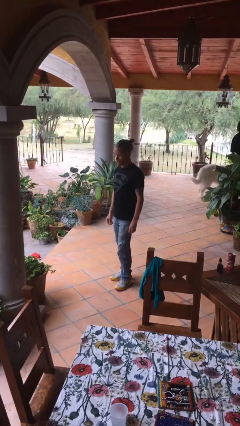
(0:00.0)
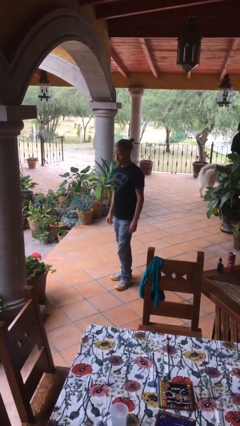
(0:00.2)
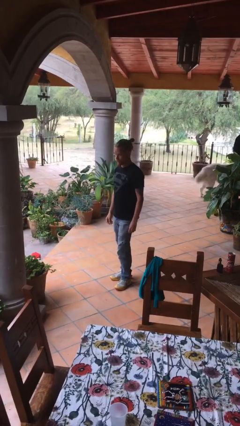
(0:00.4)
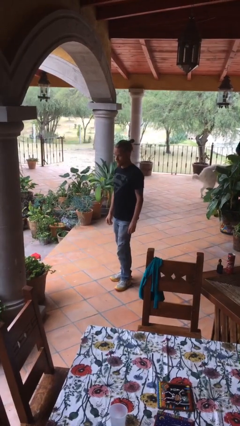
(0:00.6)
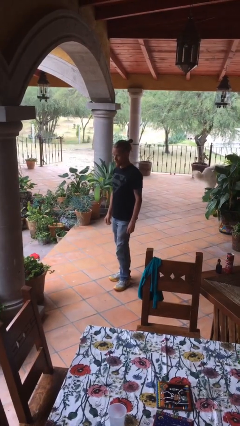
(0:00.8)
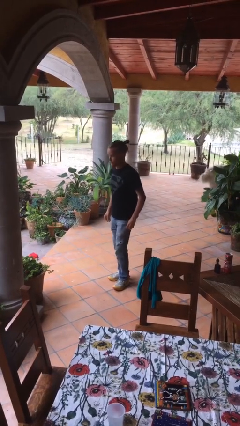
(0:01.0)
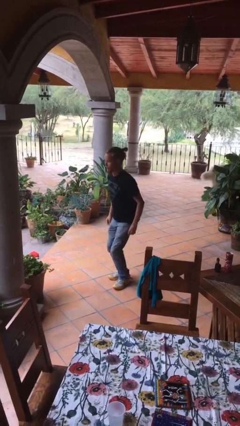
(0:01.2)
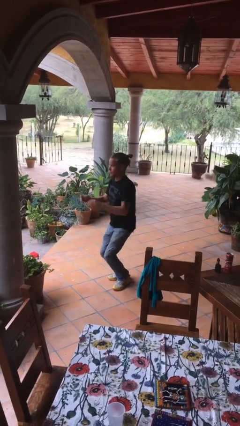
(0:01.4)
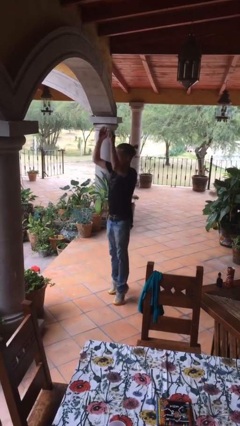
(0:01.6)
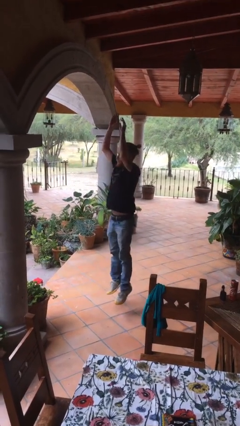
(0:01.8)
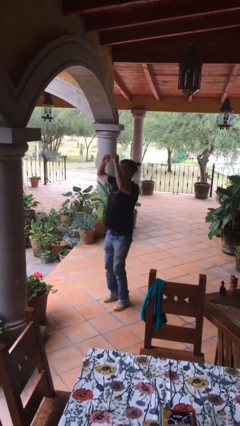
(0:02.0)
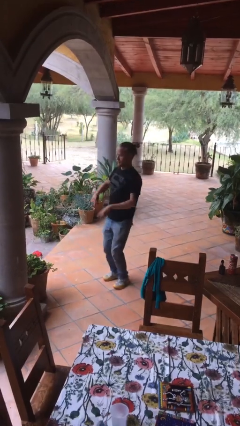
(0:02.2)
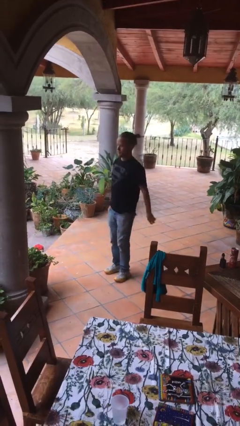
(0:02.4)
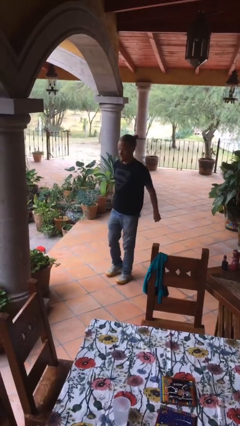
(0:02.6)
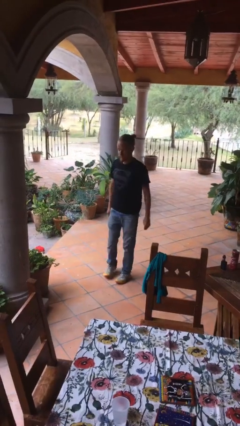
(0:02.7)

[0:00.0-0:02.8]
person jumps

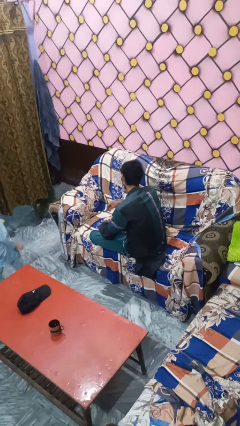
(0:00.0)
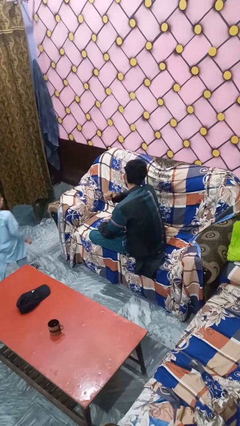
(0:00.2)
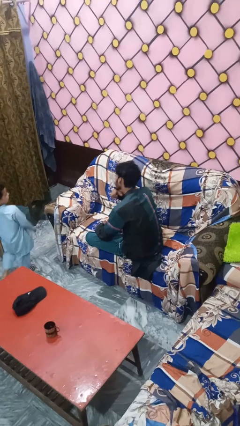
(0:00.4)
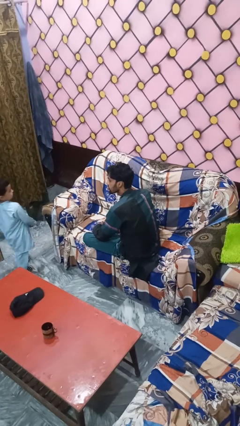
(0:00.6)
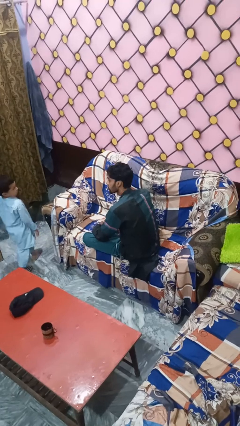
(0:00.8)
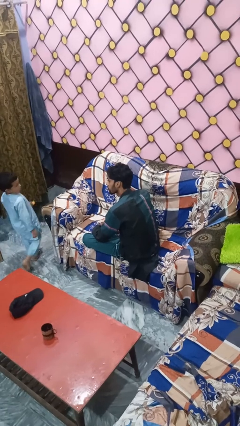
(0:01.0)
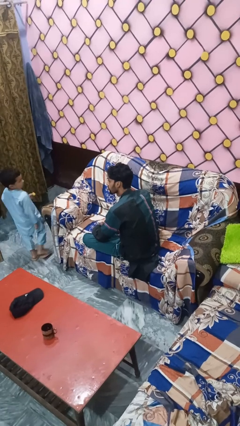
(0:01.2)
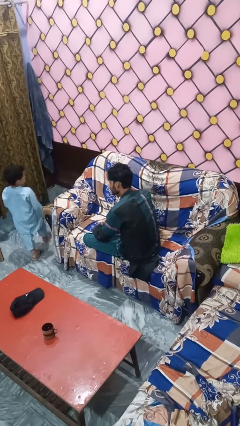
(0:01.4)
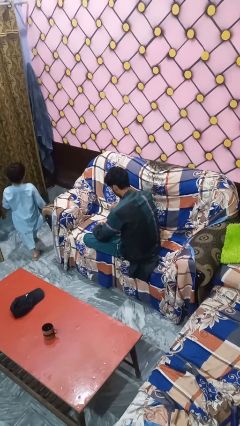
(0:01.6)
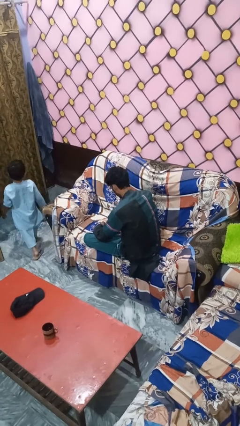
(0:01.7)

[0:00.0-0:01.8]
person gestures cut

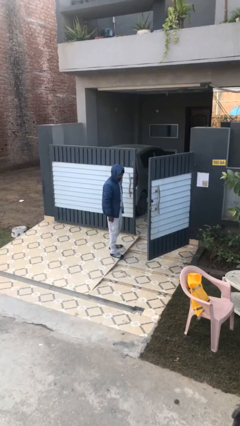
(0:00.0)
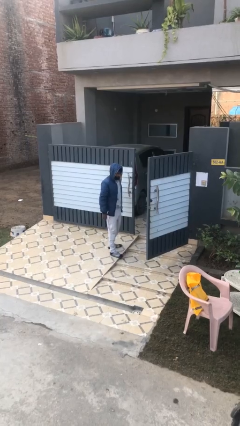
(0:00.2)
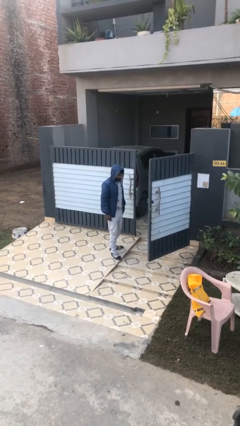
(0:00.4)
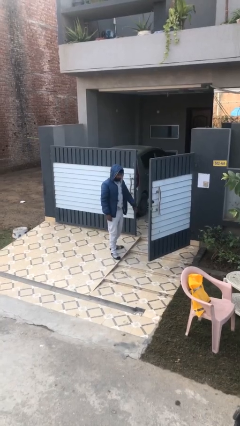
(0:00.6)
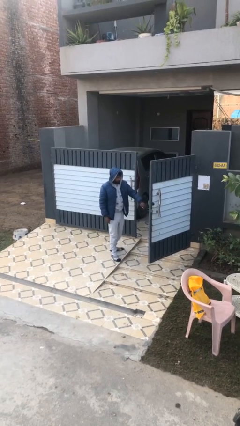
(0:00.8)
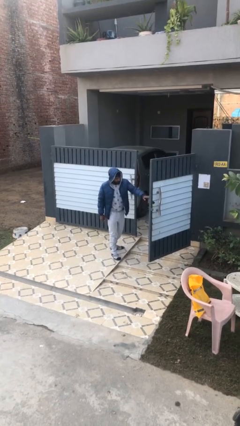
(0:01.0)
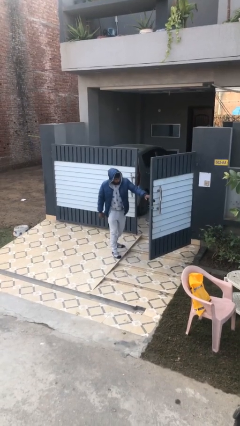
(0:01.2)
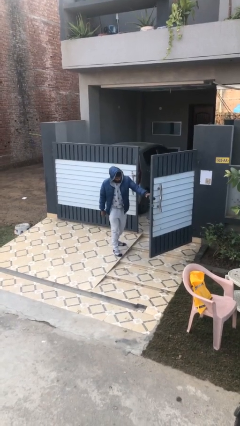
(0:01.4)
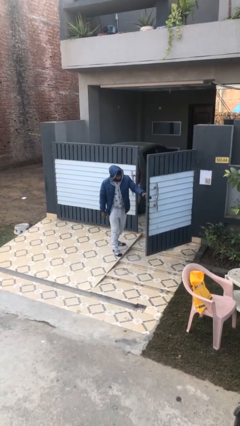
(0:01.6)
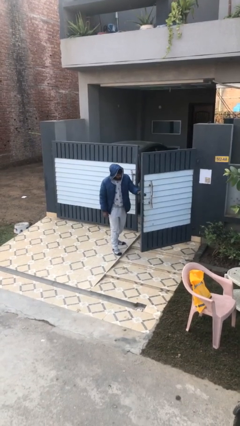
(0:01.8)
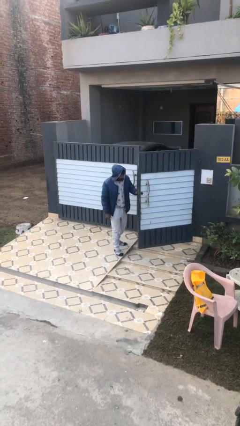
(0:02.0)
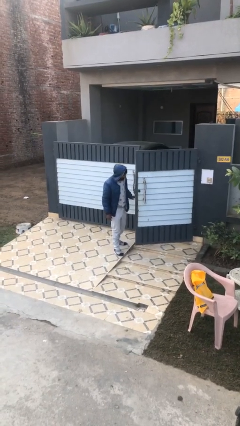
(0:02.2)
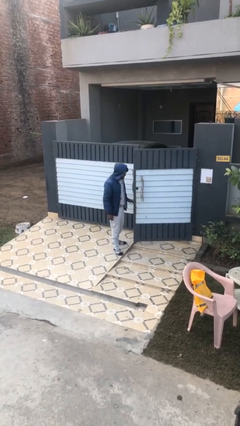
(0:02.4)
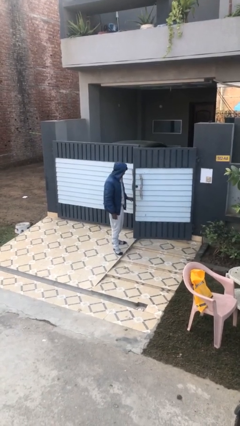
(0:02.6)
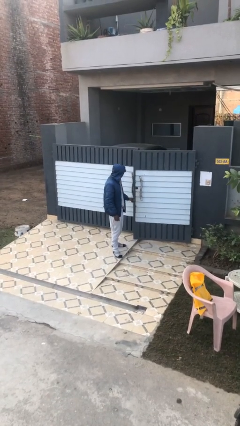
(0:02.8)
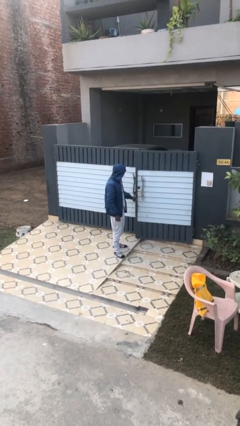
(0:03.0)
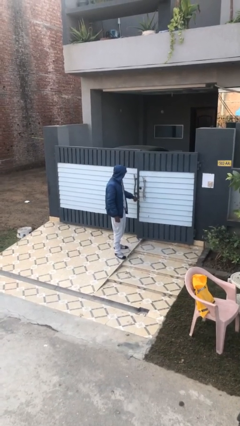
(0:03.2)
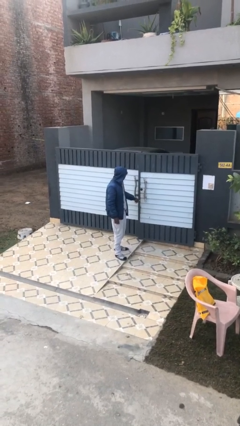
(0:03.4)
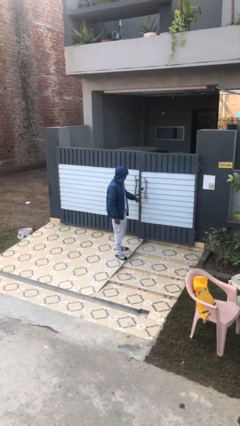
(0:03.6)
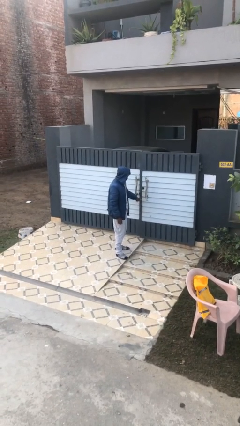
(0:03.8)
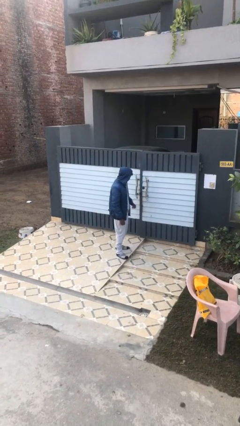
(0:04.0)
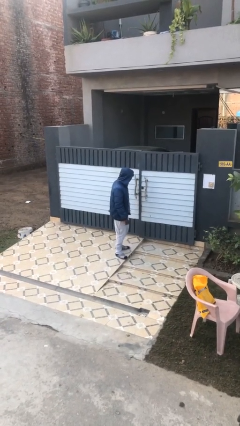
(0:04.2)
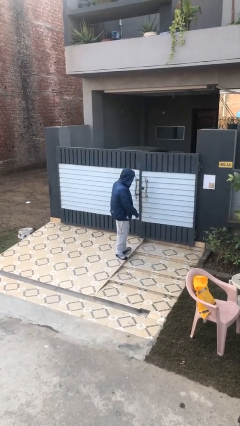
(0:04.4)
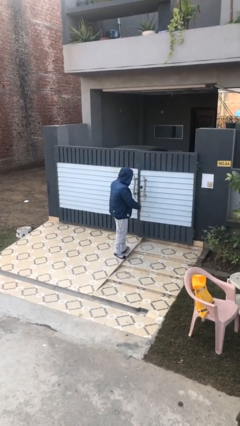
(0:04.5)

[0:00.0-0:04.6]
person closes facility door

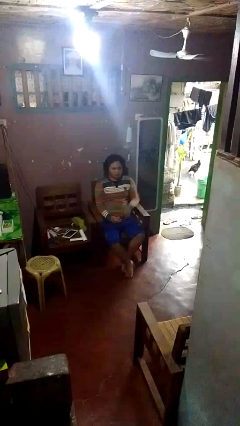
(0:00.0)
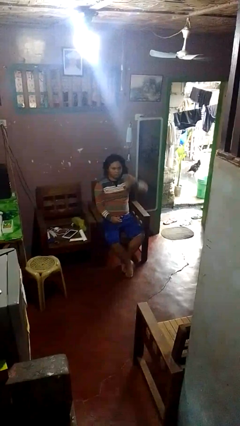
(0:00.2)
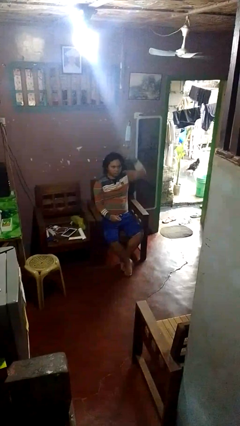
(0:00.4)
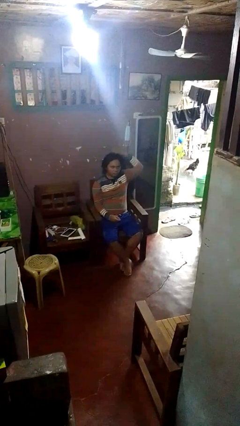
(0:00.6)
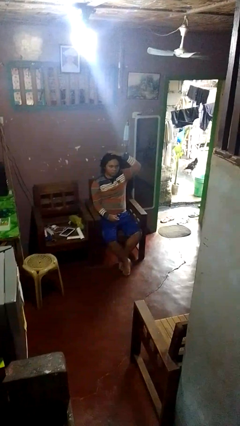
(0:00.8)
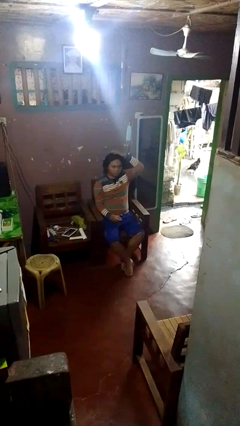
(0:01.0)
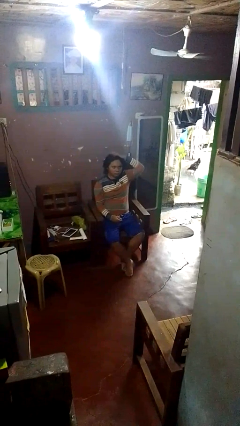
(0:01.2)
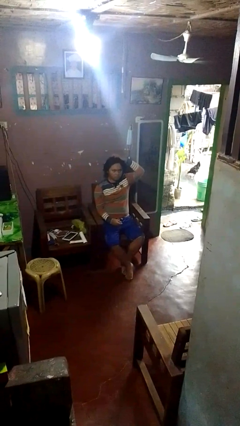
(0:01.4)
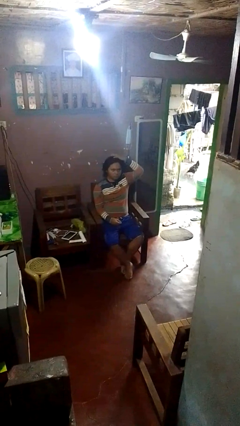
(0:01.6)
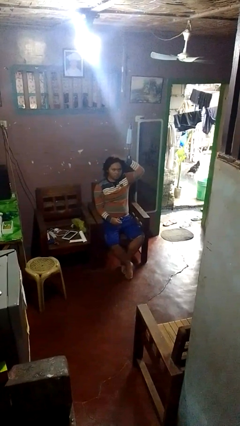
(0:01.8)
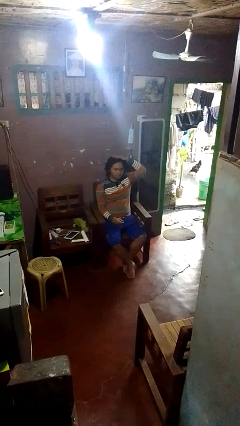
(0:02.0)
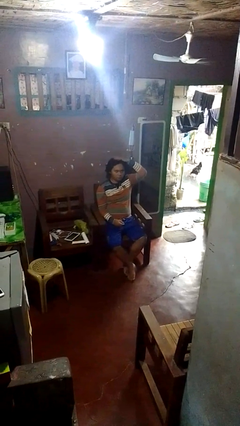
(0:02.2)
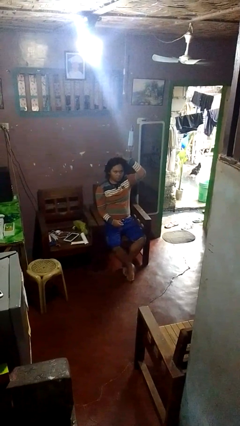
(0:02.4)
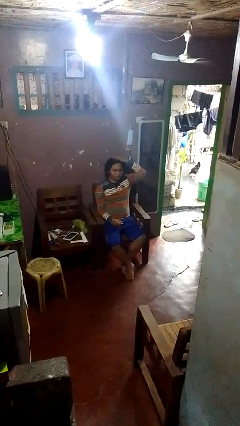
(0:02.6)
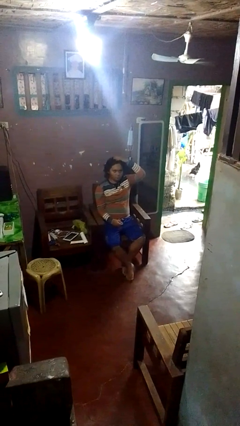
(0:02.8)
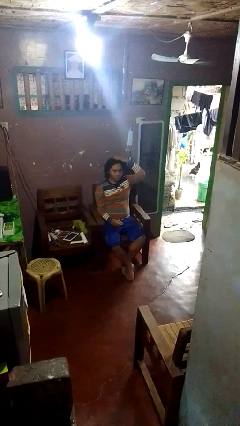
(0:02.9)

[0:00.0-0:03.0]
person pats head

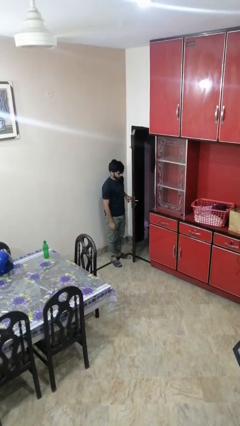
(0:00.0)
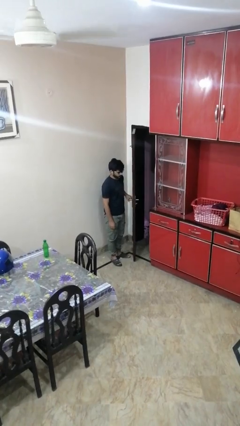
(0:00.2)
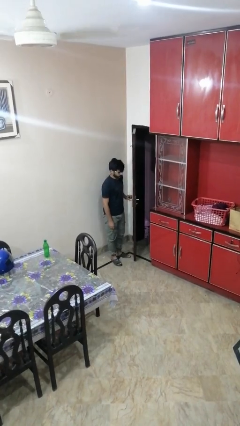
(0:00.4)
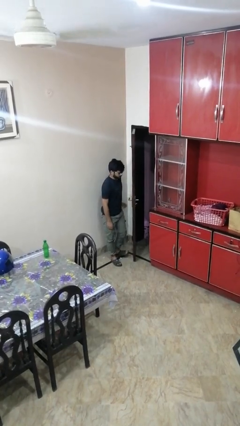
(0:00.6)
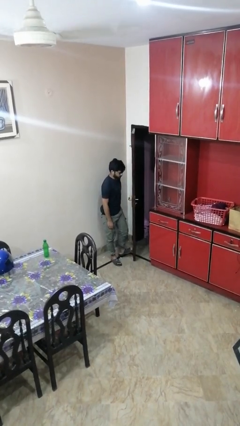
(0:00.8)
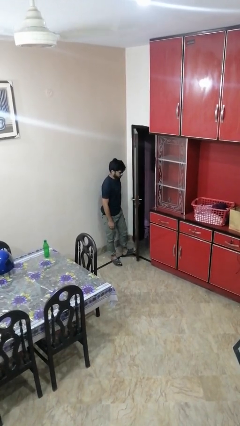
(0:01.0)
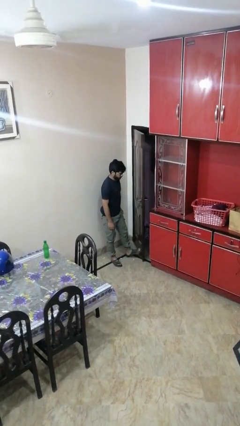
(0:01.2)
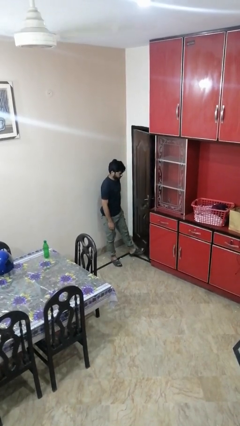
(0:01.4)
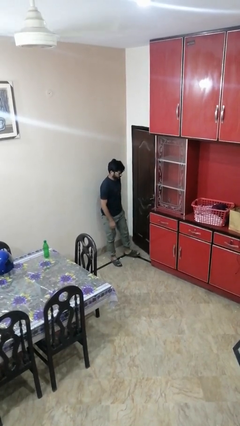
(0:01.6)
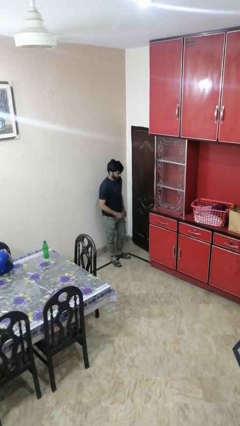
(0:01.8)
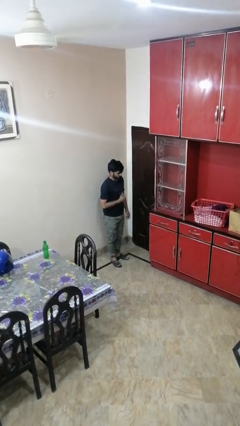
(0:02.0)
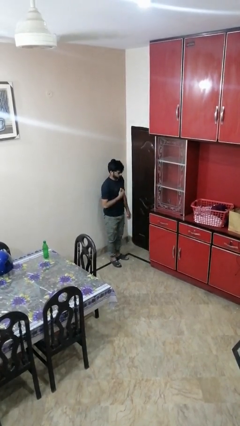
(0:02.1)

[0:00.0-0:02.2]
person closes door with foot

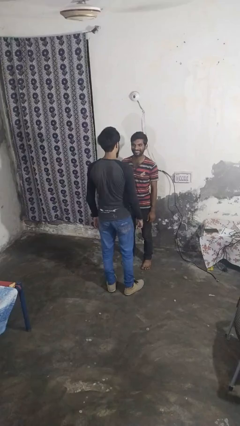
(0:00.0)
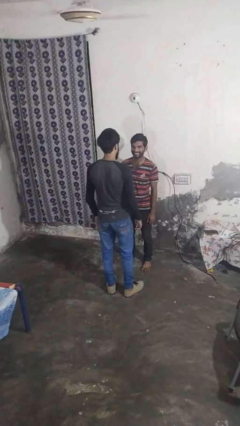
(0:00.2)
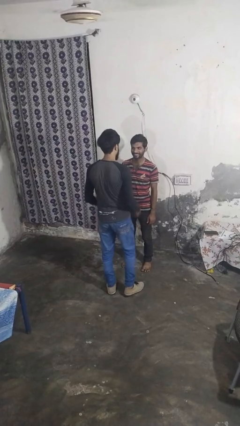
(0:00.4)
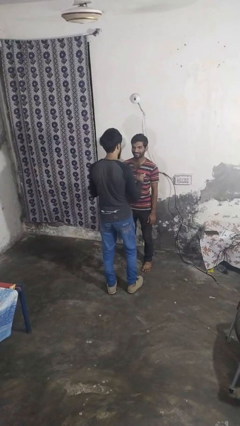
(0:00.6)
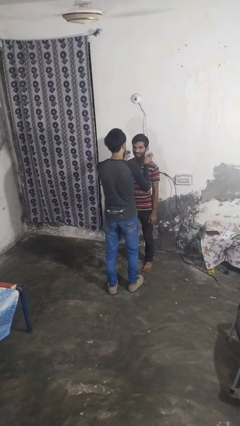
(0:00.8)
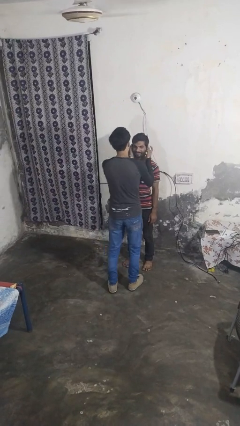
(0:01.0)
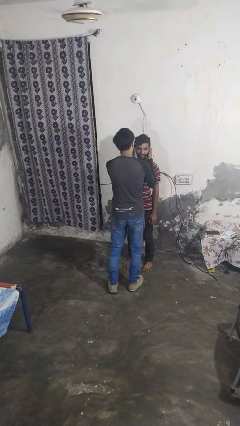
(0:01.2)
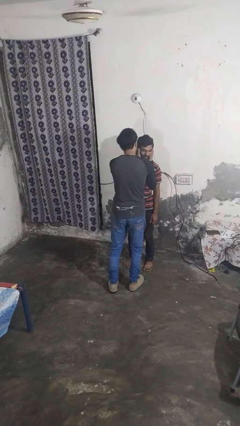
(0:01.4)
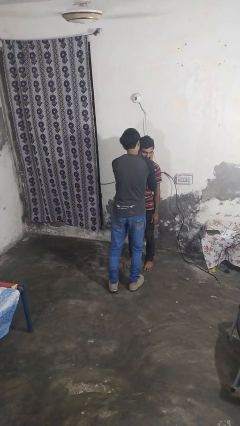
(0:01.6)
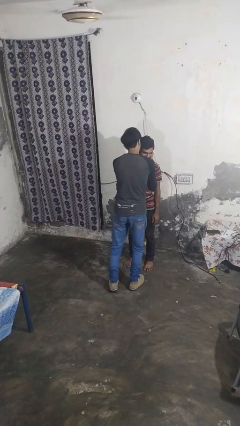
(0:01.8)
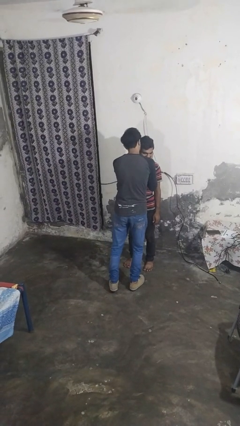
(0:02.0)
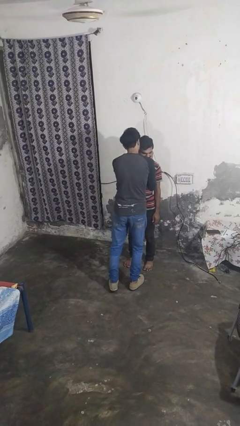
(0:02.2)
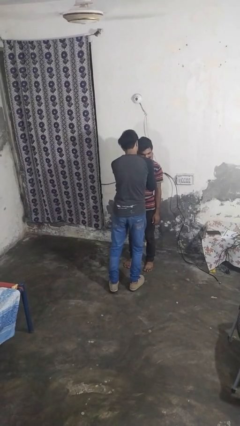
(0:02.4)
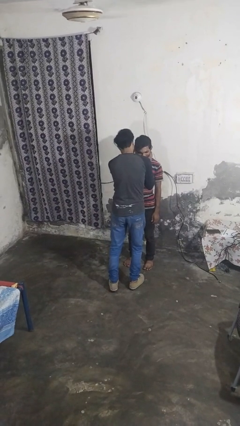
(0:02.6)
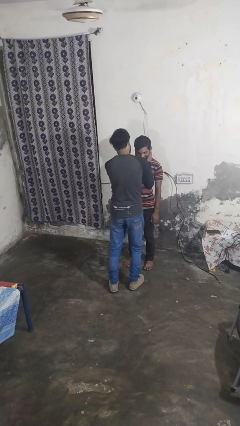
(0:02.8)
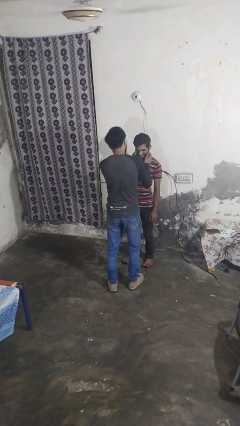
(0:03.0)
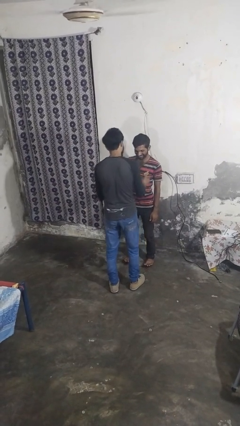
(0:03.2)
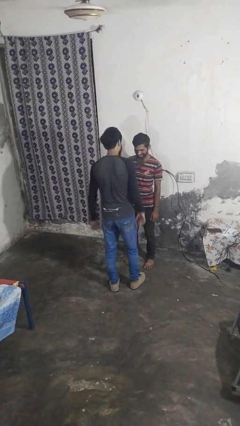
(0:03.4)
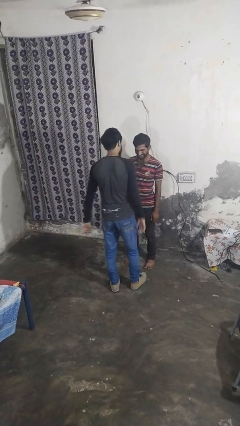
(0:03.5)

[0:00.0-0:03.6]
person kisses cheek of person
